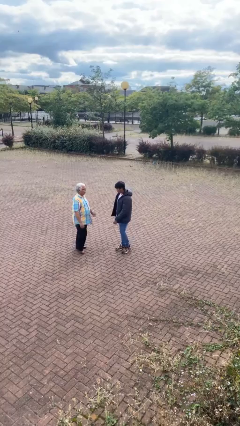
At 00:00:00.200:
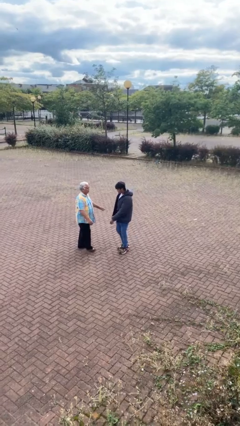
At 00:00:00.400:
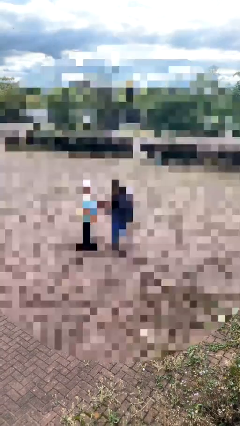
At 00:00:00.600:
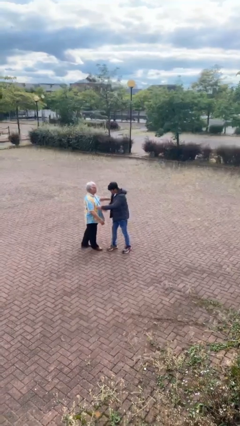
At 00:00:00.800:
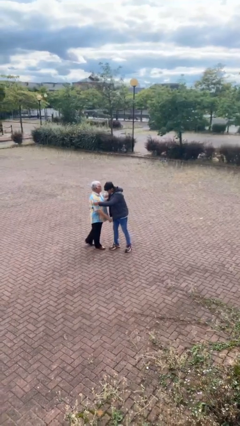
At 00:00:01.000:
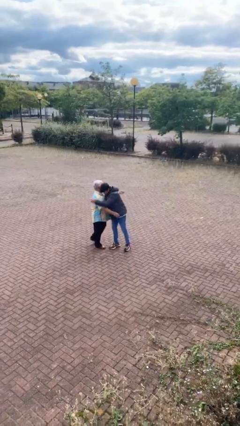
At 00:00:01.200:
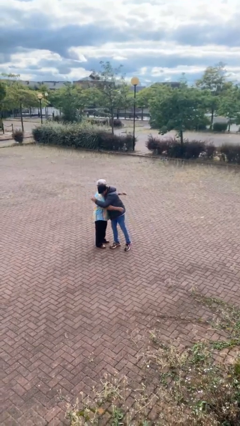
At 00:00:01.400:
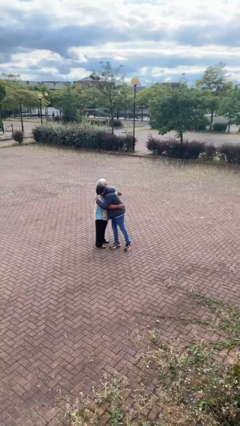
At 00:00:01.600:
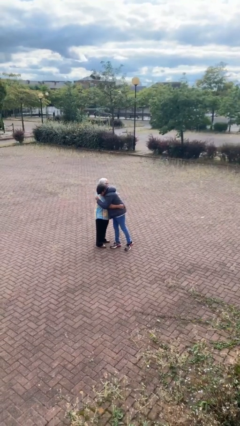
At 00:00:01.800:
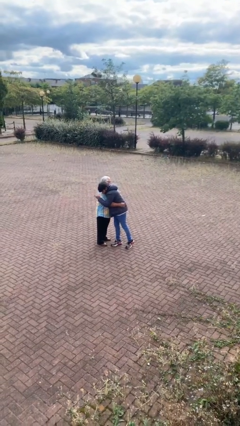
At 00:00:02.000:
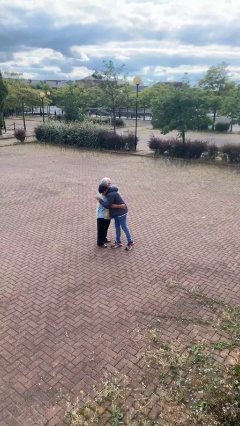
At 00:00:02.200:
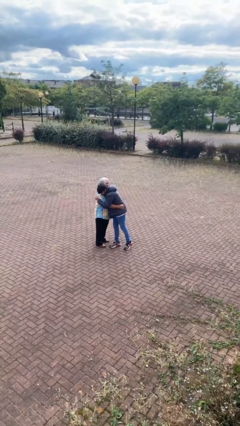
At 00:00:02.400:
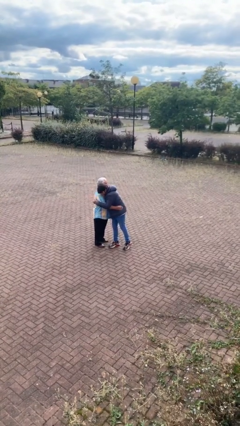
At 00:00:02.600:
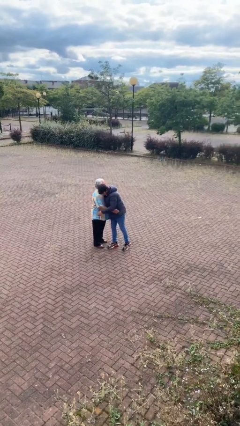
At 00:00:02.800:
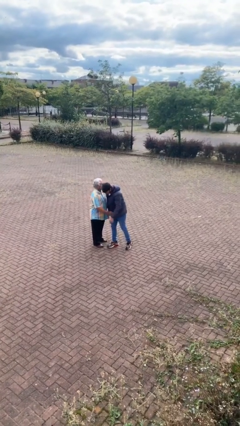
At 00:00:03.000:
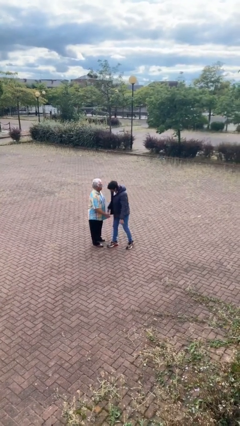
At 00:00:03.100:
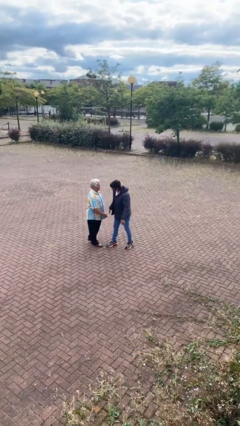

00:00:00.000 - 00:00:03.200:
person embraces person

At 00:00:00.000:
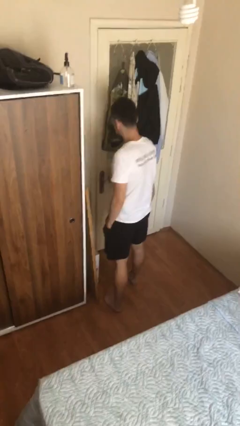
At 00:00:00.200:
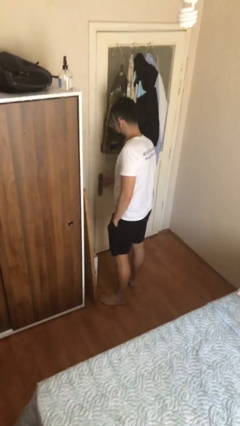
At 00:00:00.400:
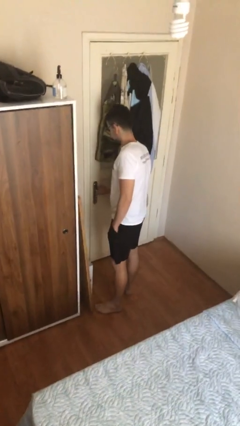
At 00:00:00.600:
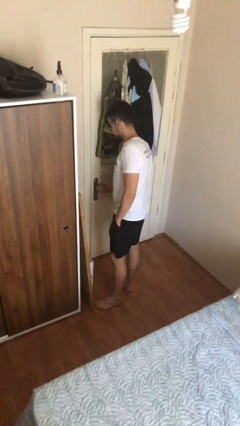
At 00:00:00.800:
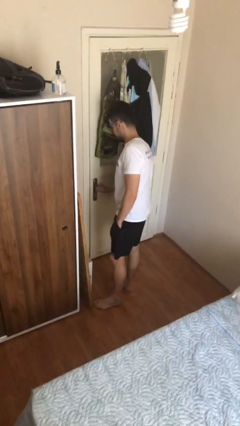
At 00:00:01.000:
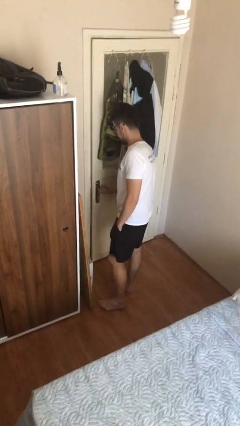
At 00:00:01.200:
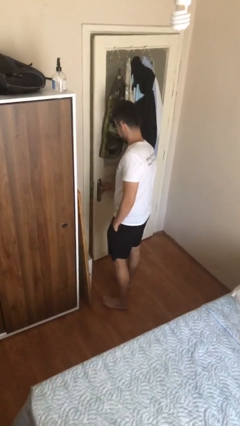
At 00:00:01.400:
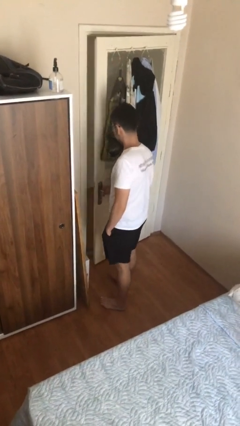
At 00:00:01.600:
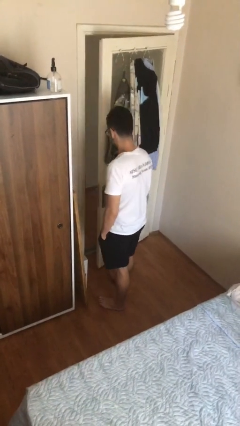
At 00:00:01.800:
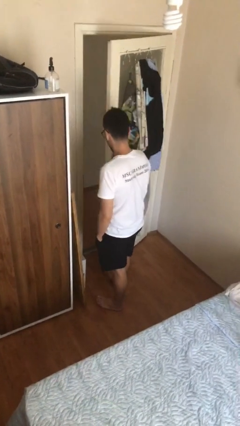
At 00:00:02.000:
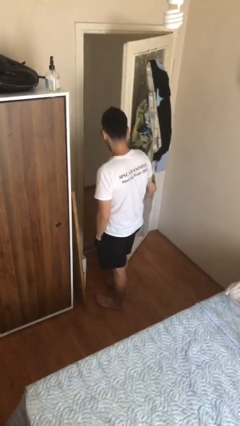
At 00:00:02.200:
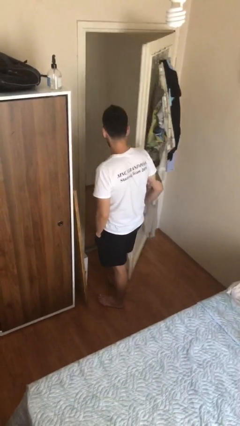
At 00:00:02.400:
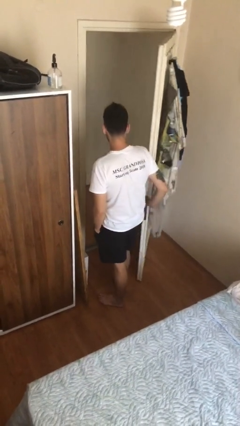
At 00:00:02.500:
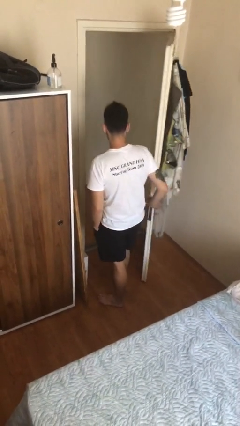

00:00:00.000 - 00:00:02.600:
person opens facility door

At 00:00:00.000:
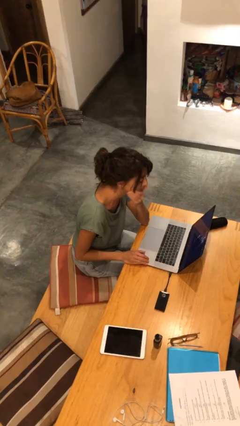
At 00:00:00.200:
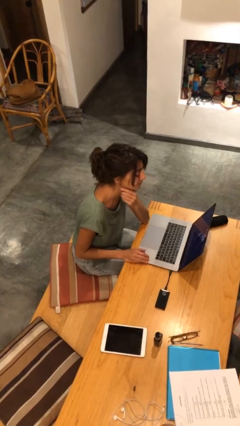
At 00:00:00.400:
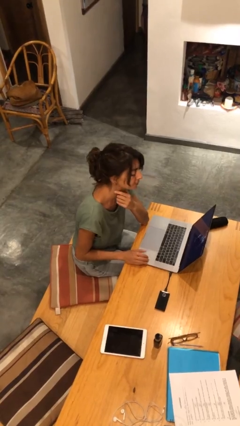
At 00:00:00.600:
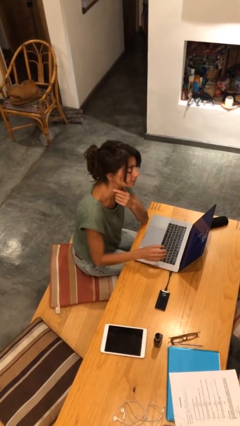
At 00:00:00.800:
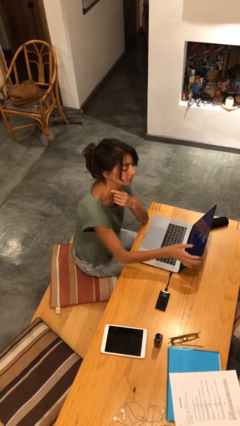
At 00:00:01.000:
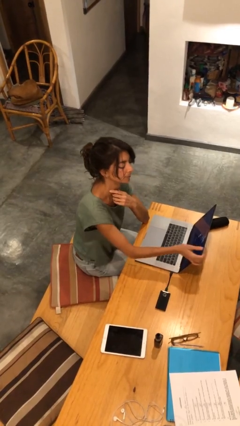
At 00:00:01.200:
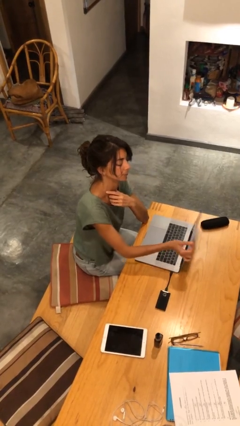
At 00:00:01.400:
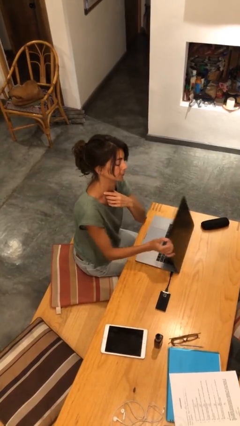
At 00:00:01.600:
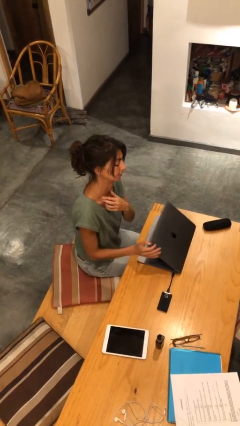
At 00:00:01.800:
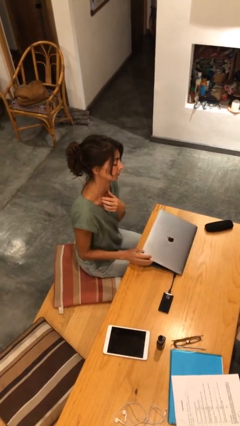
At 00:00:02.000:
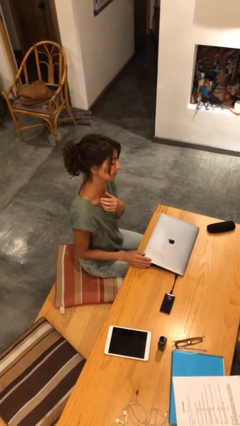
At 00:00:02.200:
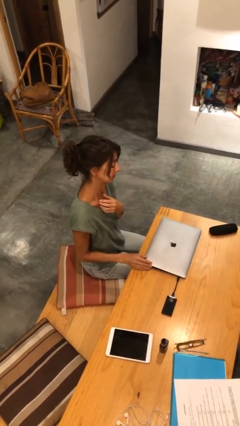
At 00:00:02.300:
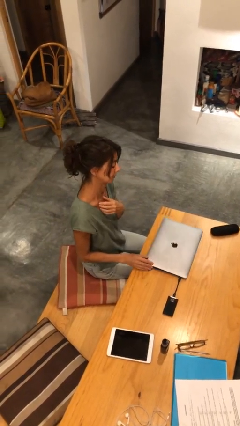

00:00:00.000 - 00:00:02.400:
person closes laptop

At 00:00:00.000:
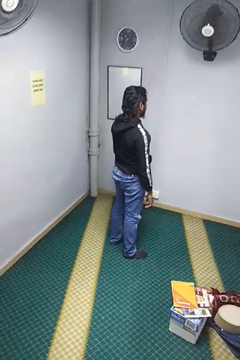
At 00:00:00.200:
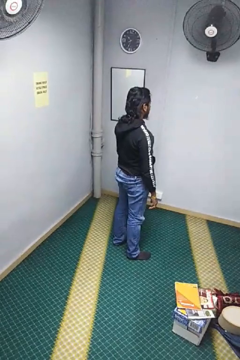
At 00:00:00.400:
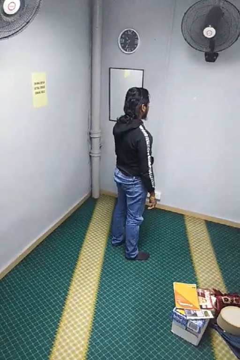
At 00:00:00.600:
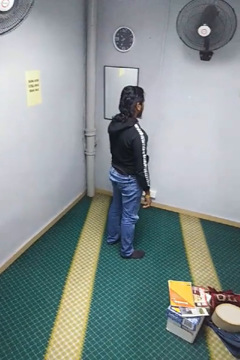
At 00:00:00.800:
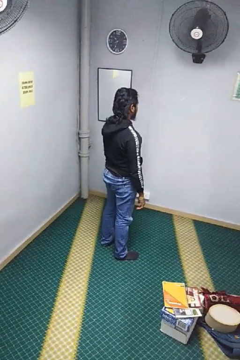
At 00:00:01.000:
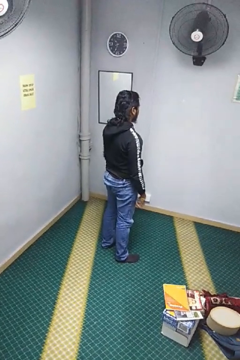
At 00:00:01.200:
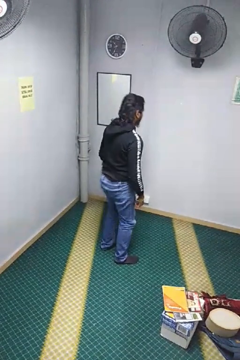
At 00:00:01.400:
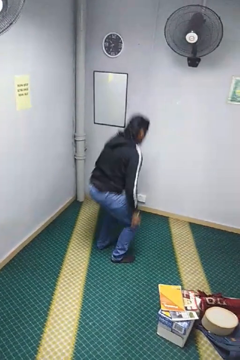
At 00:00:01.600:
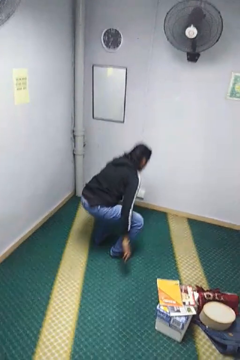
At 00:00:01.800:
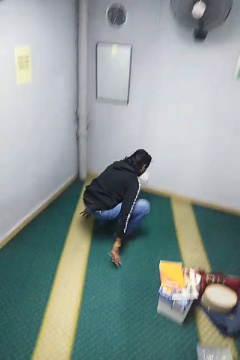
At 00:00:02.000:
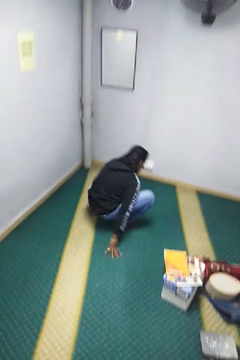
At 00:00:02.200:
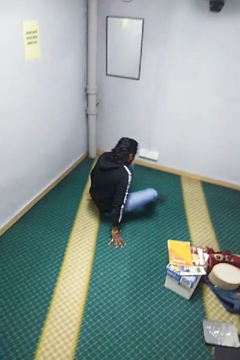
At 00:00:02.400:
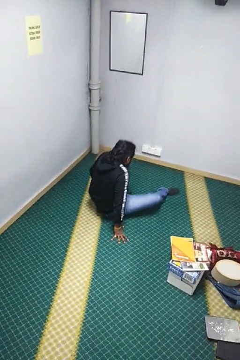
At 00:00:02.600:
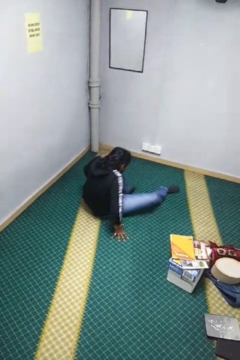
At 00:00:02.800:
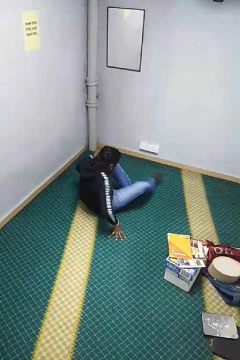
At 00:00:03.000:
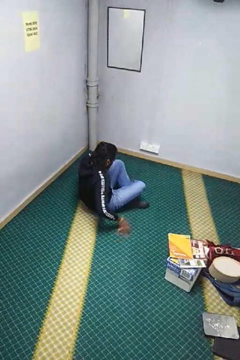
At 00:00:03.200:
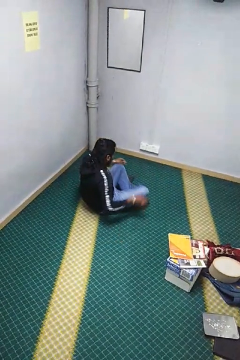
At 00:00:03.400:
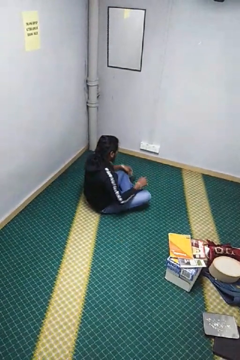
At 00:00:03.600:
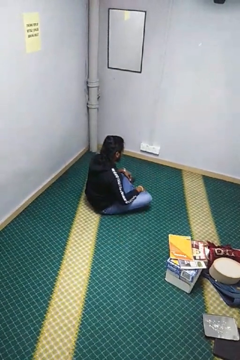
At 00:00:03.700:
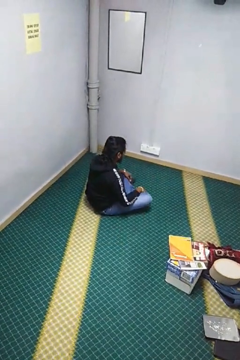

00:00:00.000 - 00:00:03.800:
person sits crisscross

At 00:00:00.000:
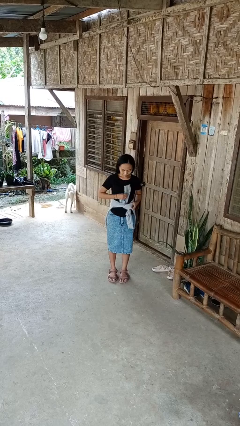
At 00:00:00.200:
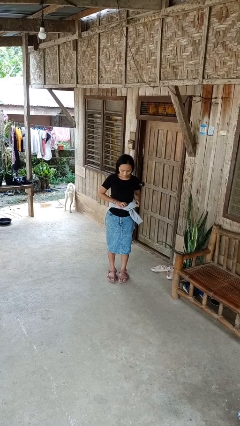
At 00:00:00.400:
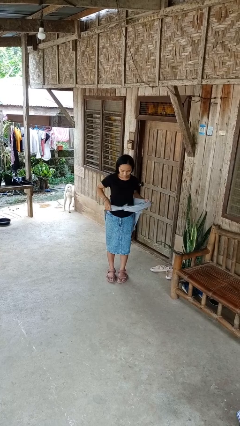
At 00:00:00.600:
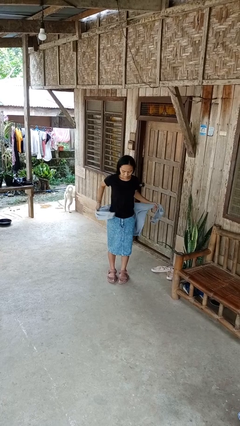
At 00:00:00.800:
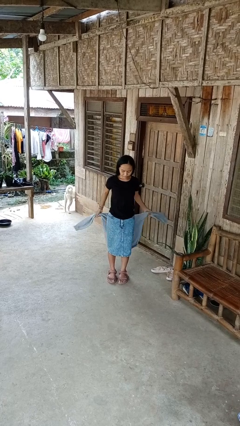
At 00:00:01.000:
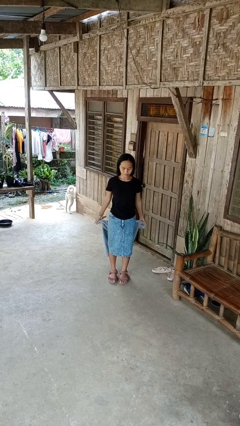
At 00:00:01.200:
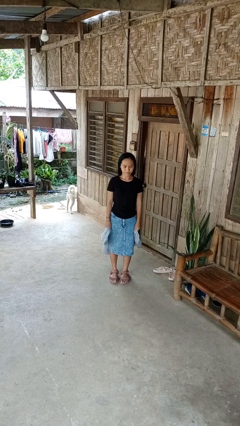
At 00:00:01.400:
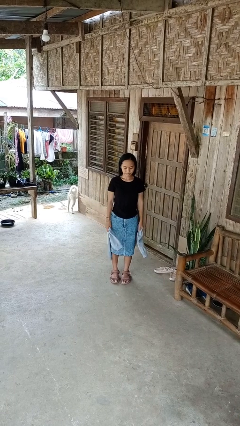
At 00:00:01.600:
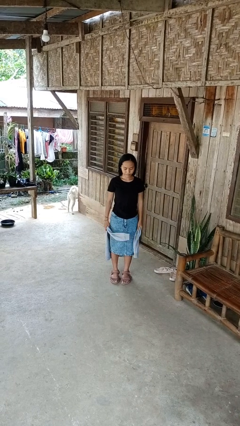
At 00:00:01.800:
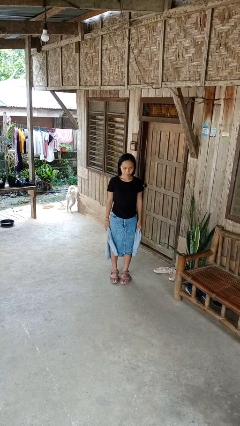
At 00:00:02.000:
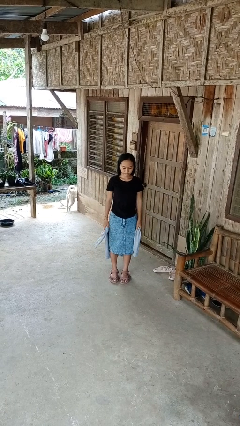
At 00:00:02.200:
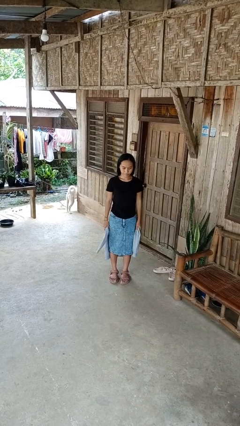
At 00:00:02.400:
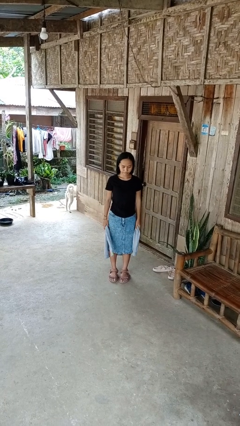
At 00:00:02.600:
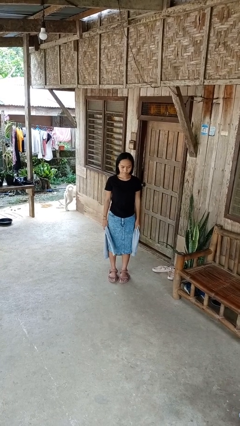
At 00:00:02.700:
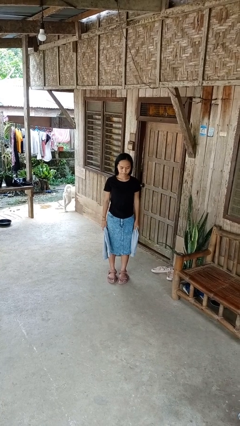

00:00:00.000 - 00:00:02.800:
person unties jacket around waist

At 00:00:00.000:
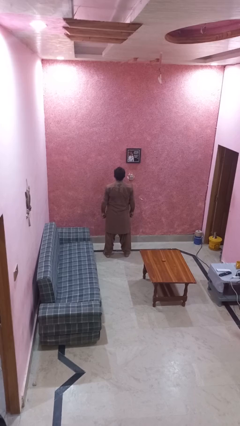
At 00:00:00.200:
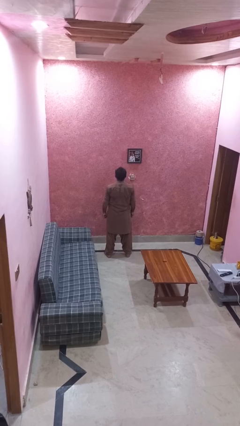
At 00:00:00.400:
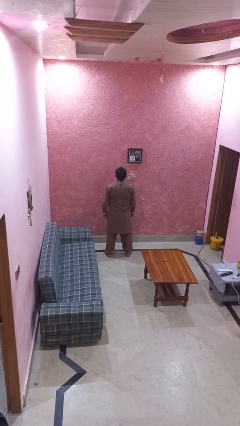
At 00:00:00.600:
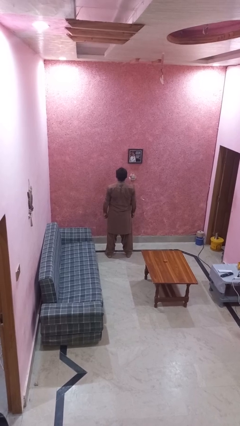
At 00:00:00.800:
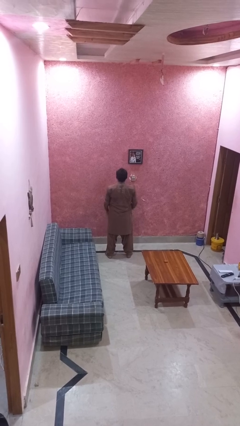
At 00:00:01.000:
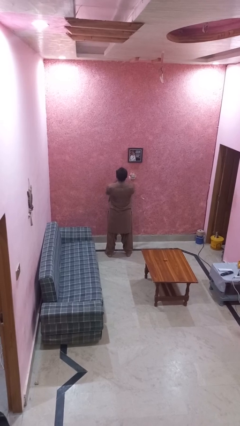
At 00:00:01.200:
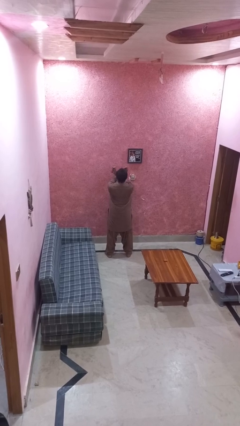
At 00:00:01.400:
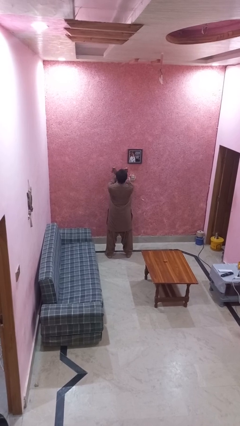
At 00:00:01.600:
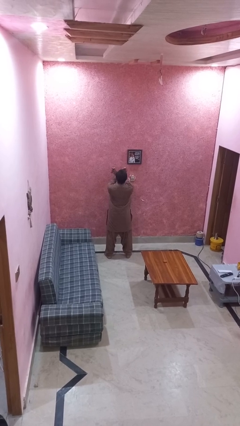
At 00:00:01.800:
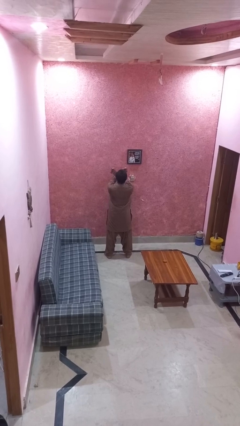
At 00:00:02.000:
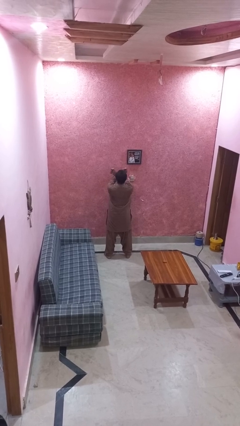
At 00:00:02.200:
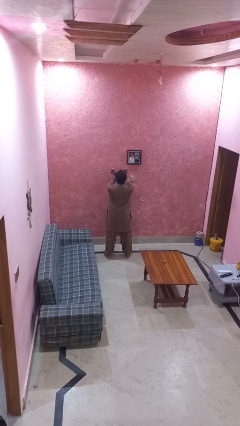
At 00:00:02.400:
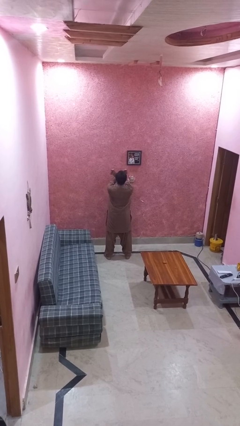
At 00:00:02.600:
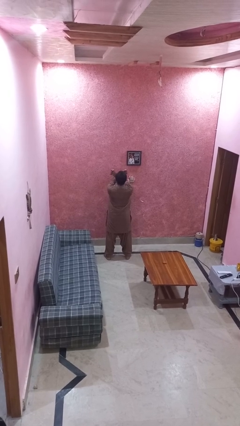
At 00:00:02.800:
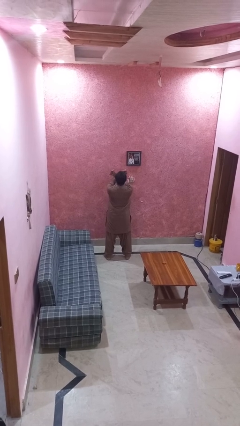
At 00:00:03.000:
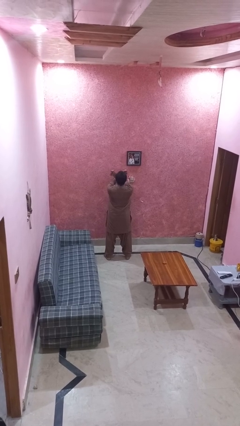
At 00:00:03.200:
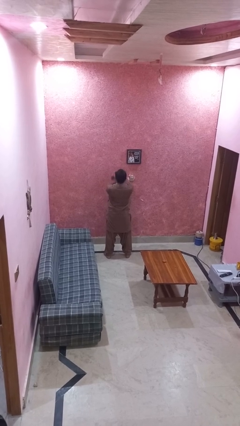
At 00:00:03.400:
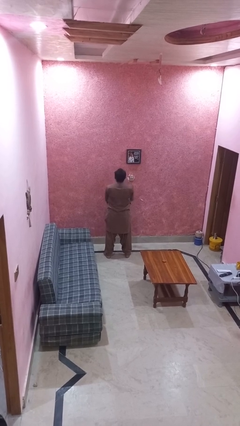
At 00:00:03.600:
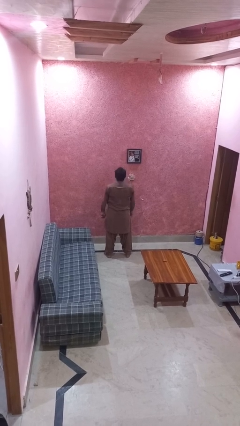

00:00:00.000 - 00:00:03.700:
person gestures arms x
